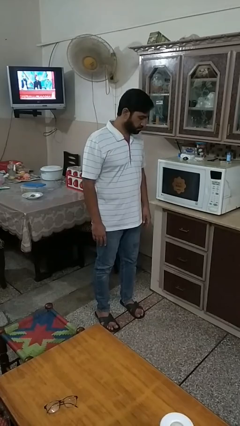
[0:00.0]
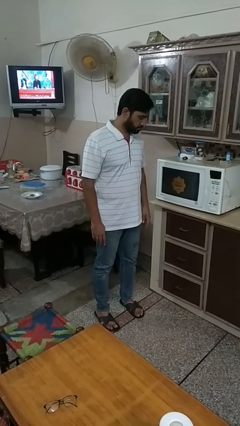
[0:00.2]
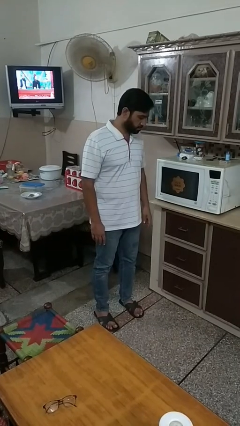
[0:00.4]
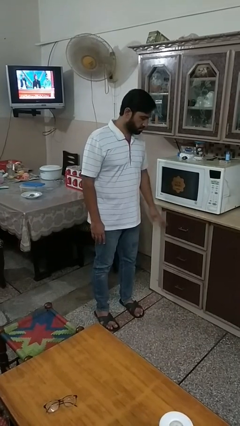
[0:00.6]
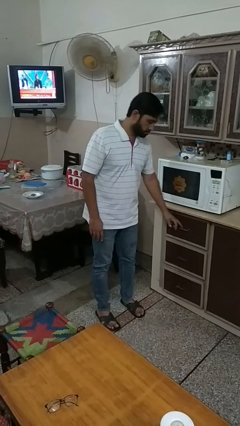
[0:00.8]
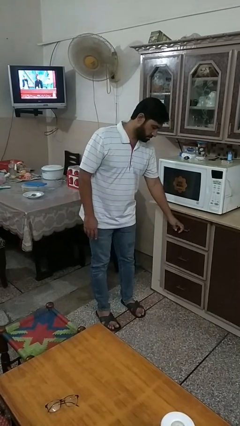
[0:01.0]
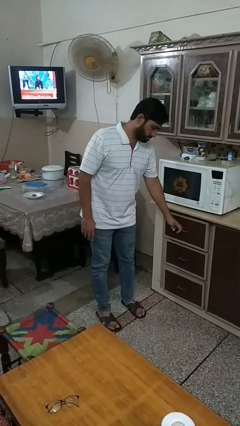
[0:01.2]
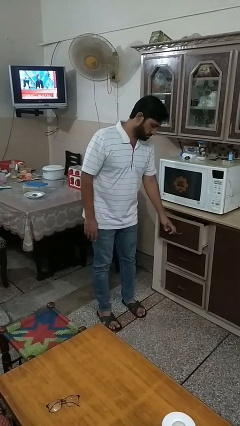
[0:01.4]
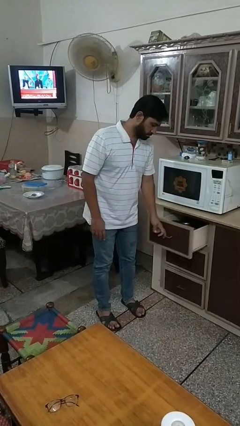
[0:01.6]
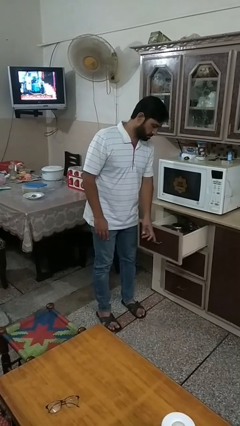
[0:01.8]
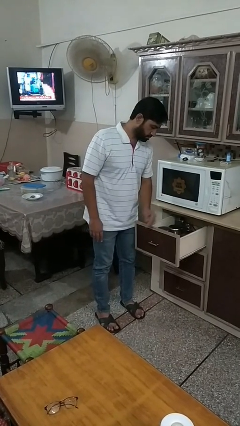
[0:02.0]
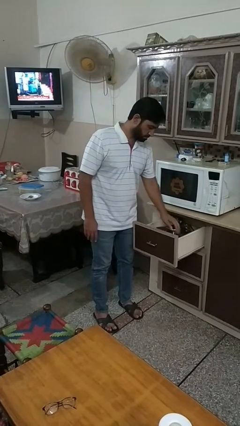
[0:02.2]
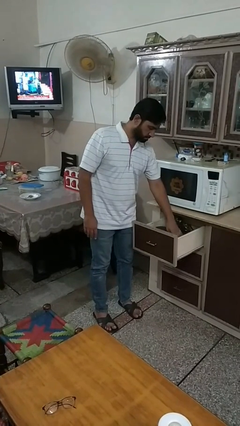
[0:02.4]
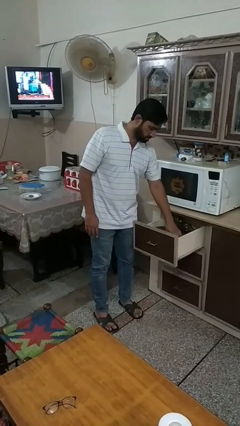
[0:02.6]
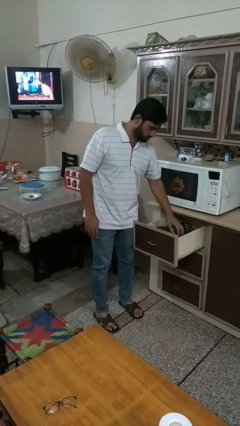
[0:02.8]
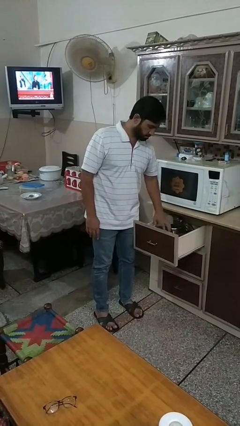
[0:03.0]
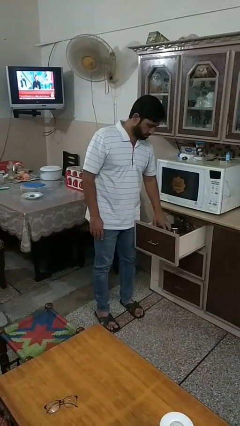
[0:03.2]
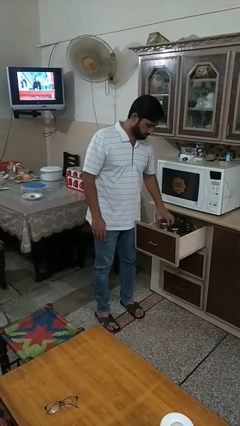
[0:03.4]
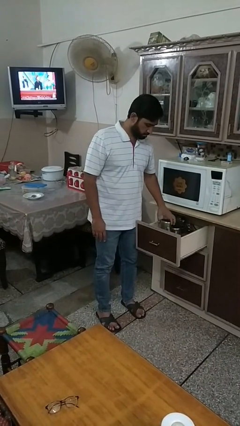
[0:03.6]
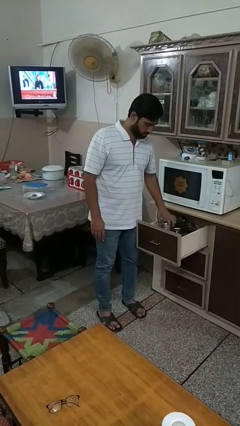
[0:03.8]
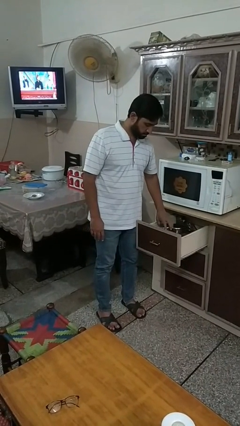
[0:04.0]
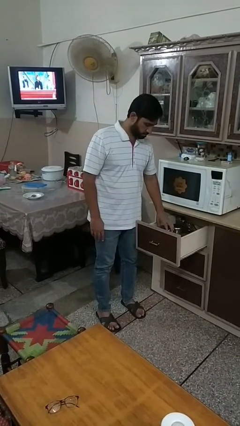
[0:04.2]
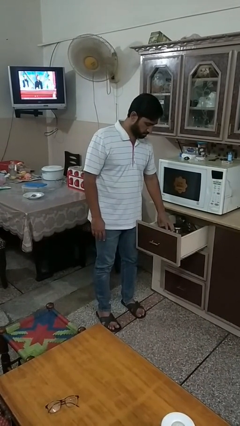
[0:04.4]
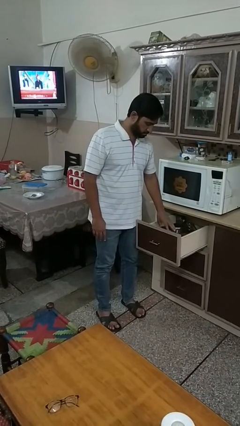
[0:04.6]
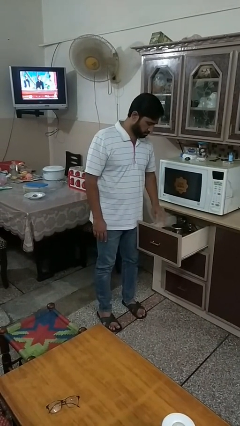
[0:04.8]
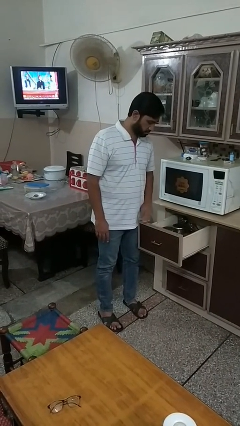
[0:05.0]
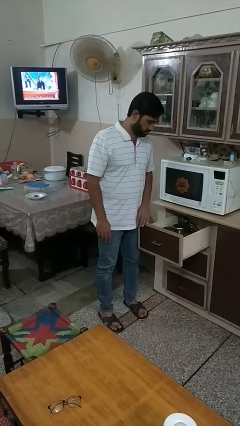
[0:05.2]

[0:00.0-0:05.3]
person opens kitchen drawer

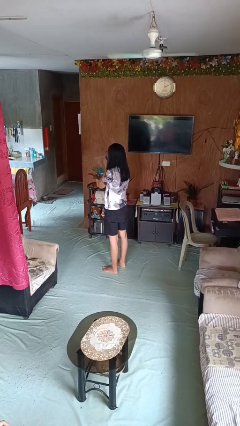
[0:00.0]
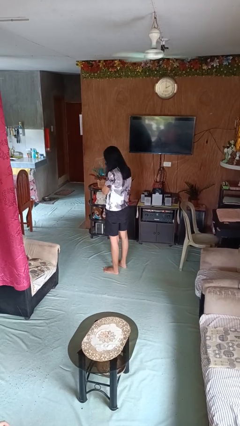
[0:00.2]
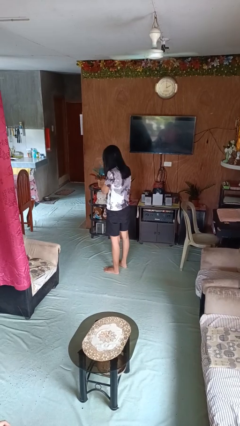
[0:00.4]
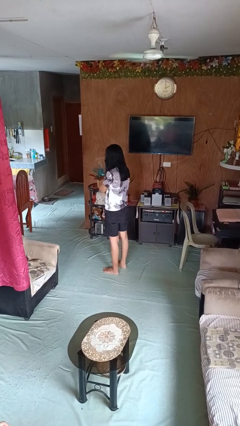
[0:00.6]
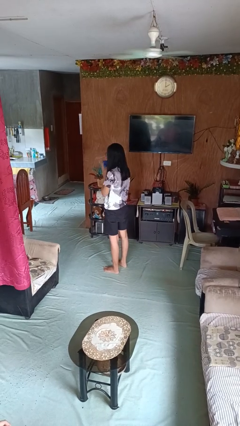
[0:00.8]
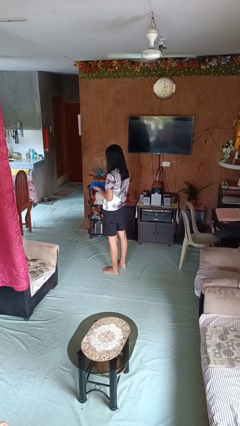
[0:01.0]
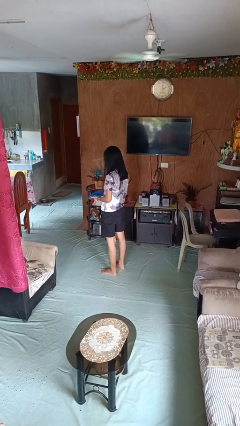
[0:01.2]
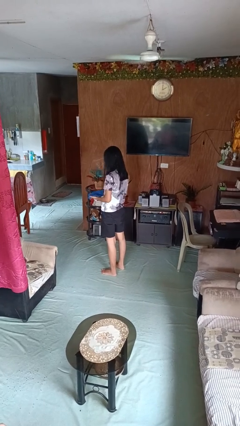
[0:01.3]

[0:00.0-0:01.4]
person blows nose

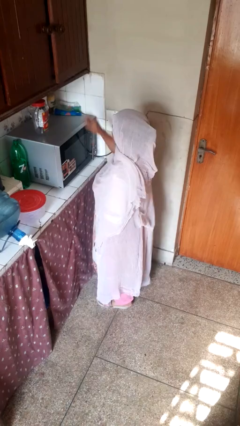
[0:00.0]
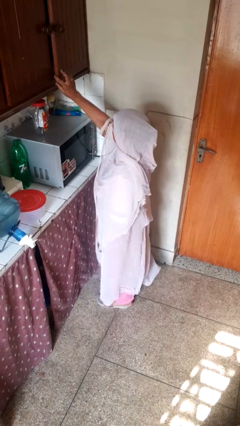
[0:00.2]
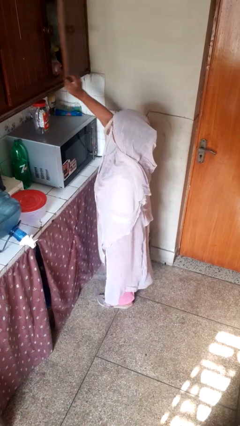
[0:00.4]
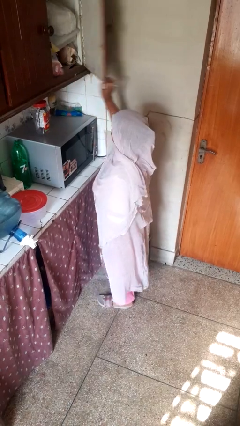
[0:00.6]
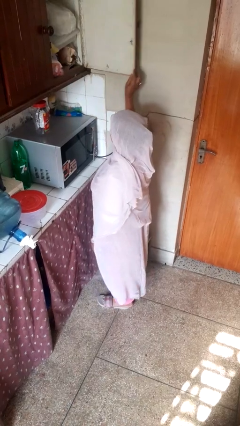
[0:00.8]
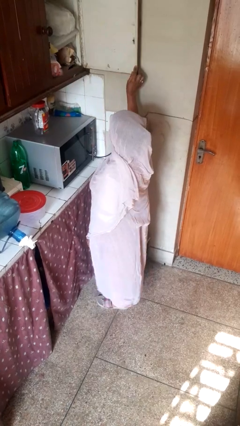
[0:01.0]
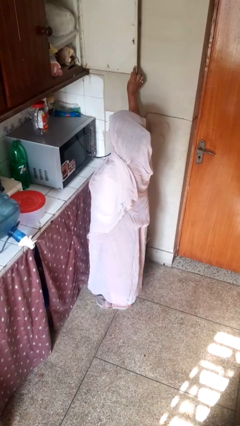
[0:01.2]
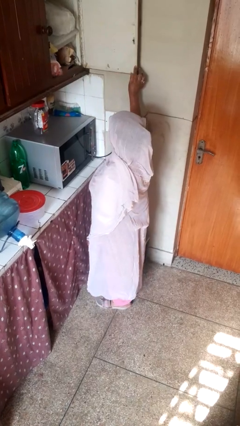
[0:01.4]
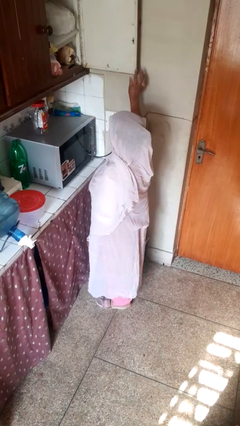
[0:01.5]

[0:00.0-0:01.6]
person opens cabinet

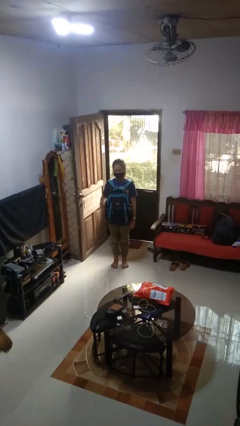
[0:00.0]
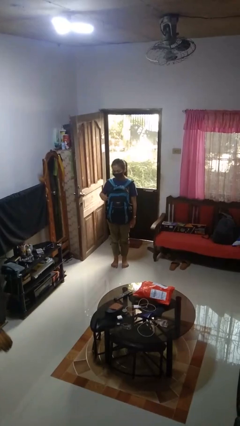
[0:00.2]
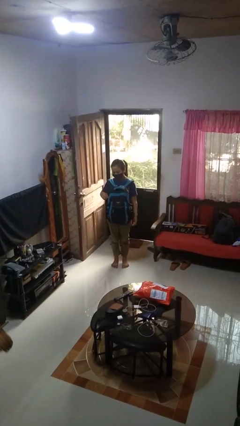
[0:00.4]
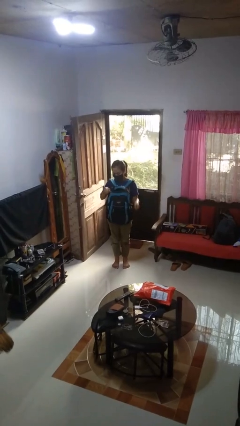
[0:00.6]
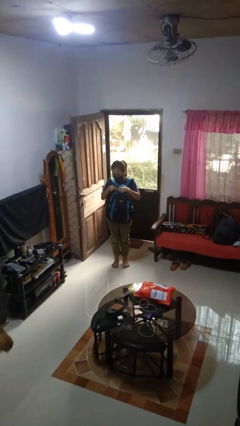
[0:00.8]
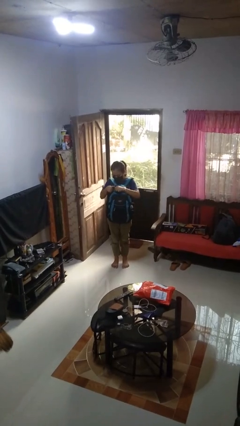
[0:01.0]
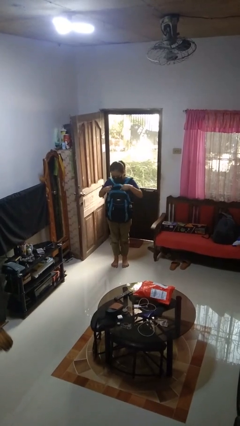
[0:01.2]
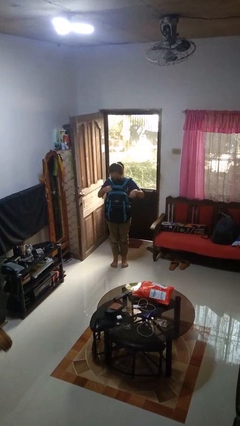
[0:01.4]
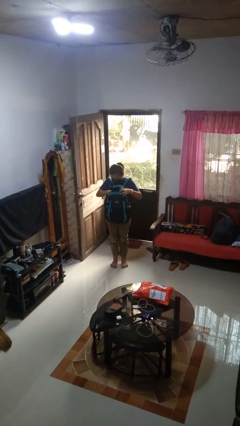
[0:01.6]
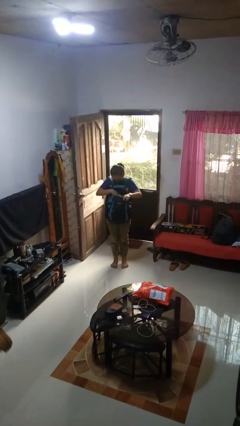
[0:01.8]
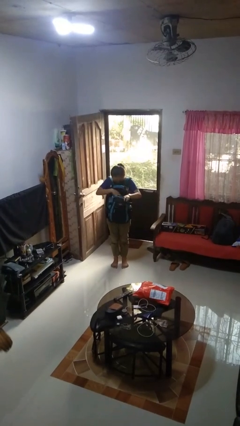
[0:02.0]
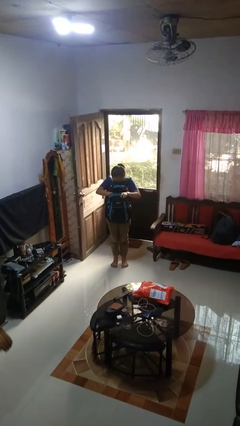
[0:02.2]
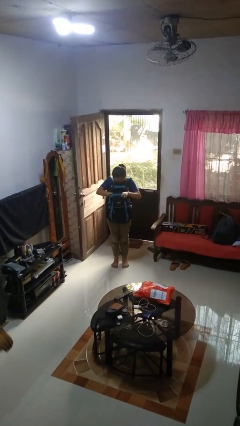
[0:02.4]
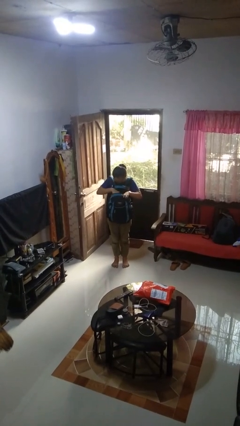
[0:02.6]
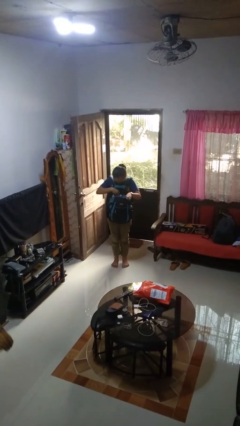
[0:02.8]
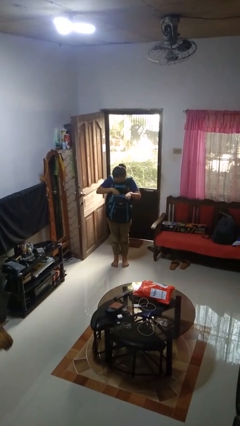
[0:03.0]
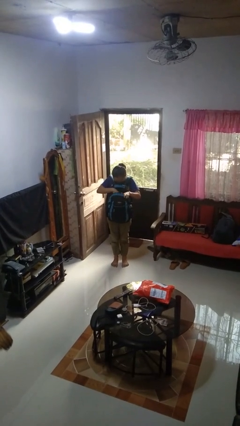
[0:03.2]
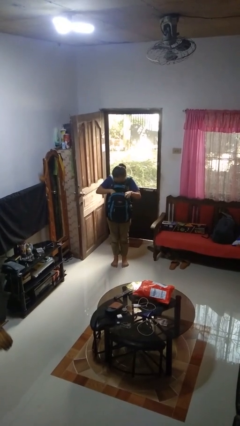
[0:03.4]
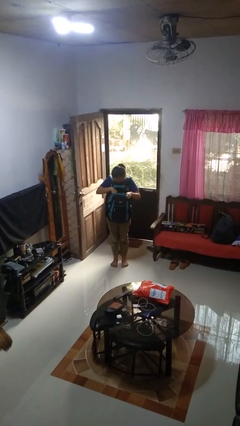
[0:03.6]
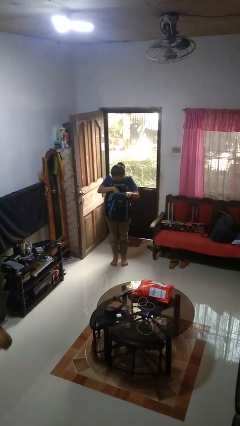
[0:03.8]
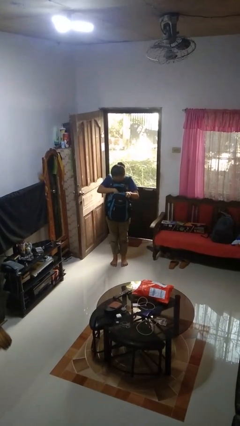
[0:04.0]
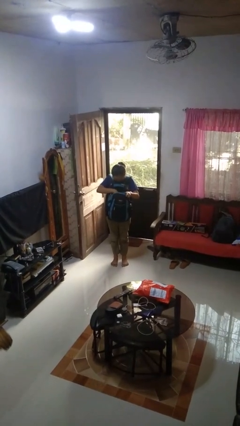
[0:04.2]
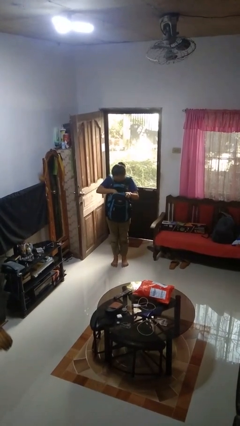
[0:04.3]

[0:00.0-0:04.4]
person searches in backpack

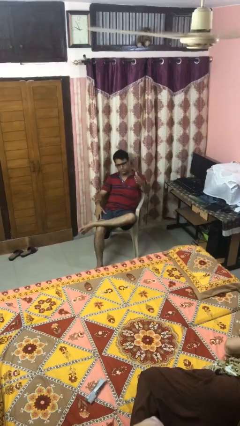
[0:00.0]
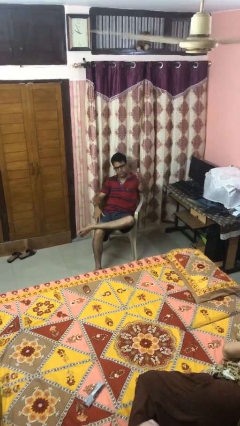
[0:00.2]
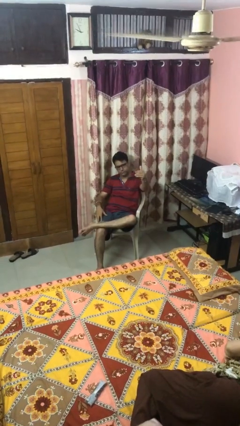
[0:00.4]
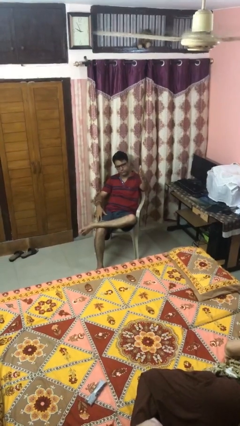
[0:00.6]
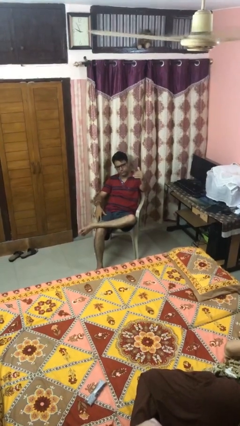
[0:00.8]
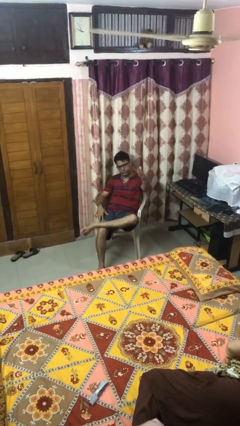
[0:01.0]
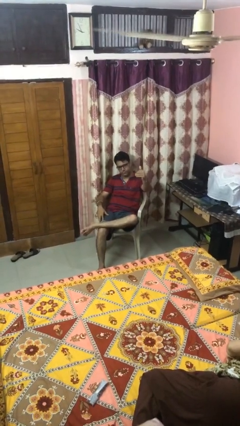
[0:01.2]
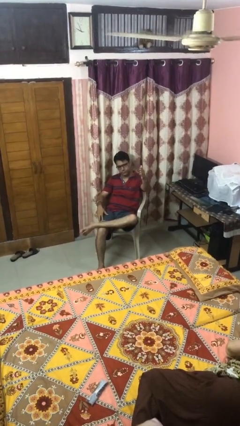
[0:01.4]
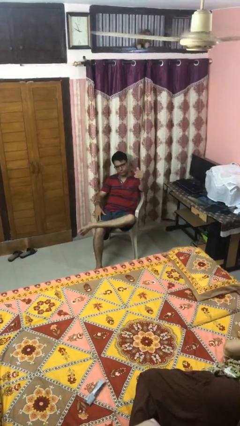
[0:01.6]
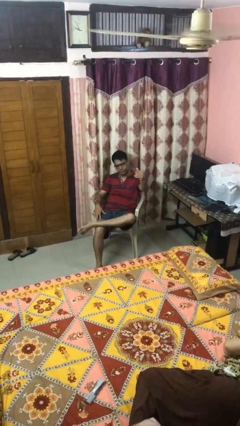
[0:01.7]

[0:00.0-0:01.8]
person gestures come here

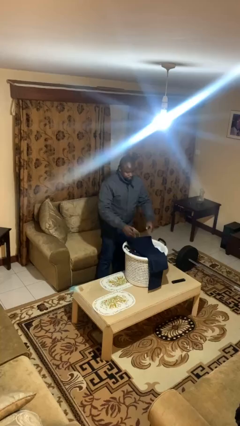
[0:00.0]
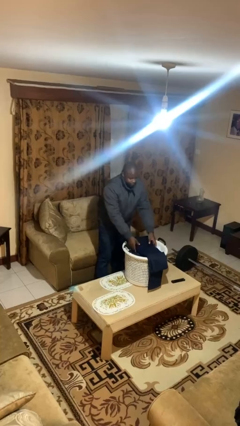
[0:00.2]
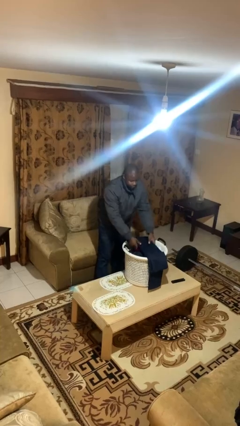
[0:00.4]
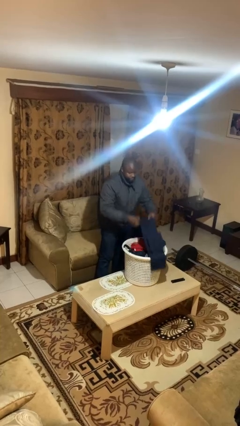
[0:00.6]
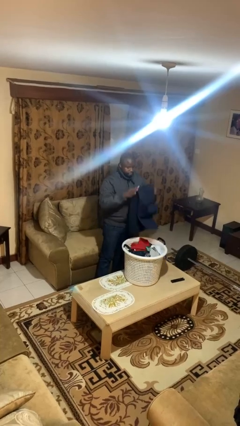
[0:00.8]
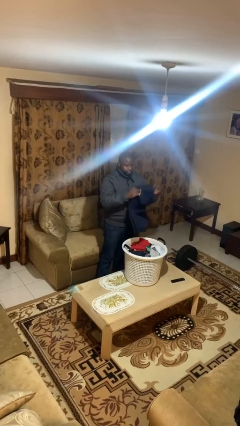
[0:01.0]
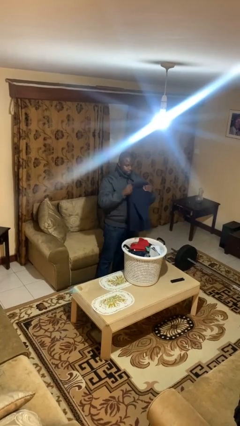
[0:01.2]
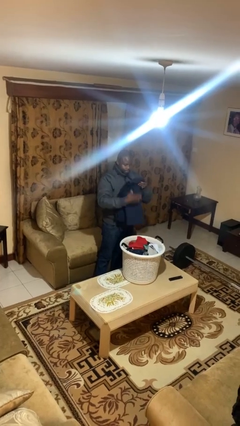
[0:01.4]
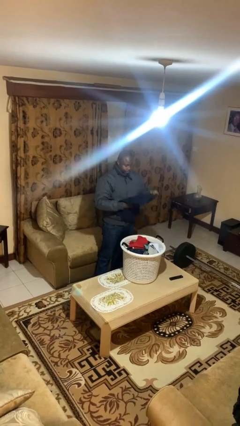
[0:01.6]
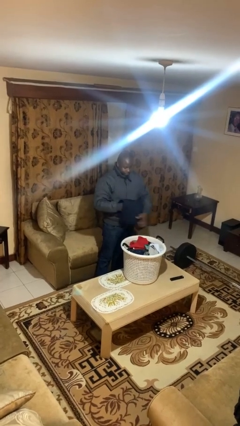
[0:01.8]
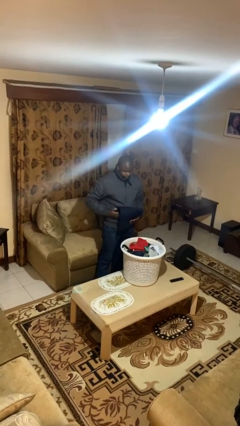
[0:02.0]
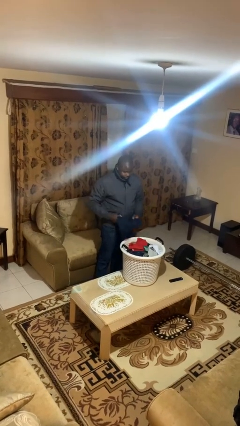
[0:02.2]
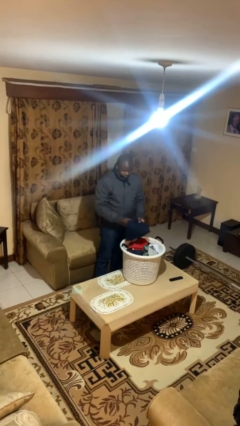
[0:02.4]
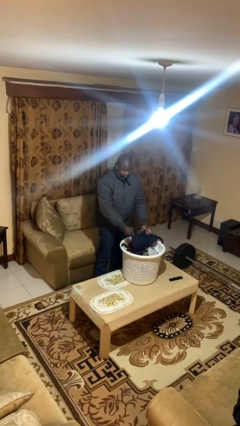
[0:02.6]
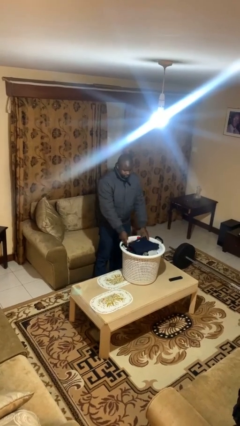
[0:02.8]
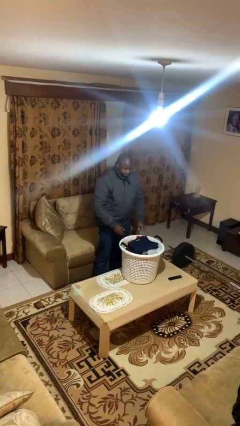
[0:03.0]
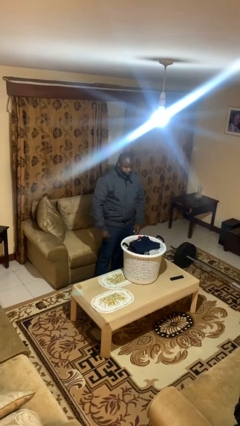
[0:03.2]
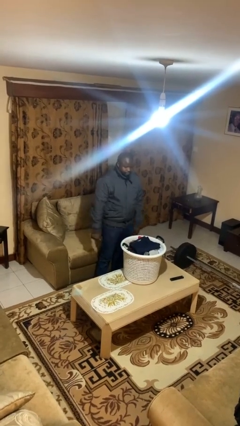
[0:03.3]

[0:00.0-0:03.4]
person folds pants
